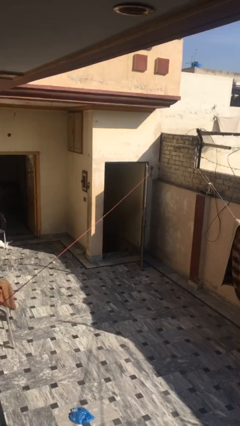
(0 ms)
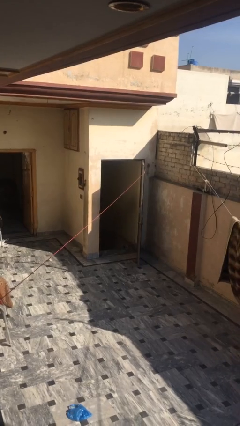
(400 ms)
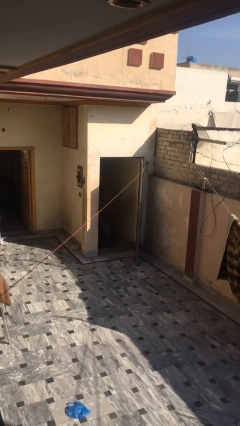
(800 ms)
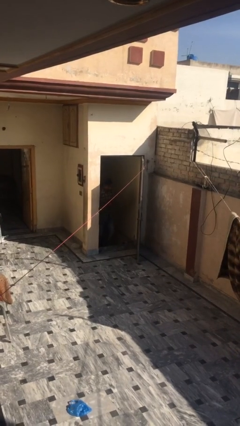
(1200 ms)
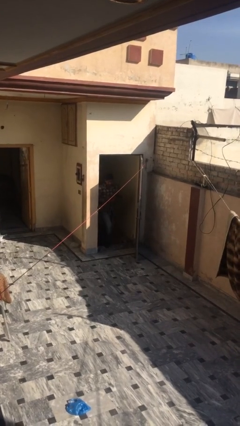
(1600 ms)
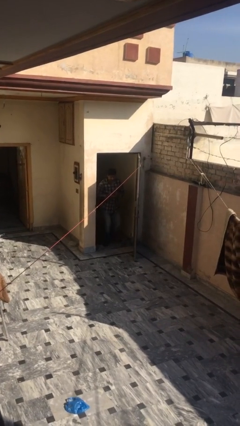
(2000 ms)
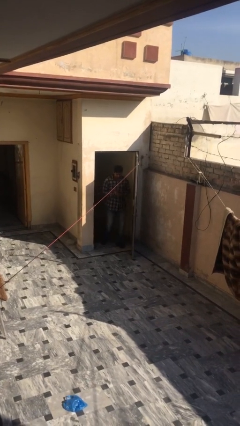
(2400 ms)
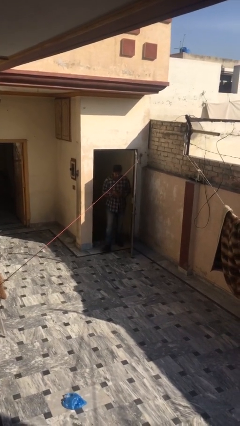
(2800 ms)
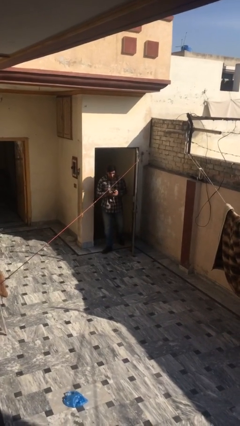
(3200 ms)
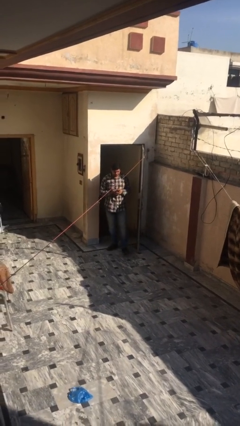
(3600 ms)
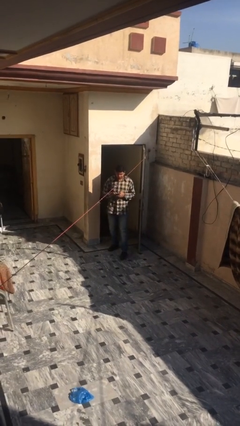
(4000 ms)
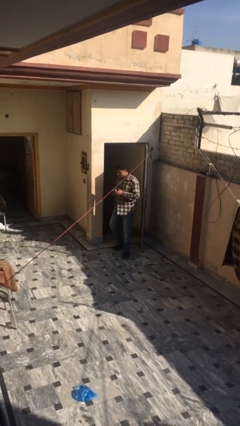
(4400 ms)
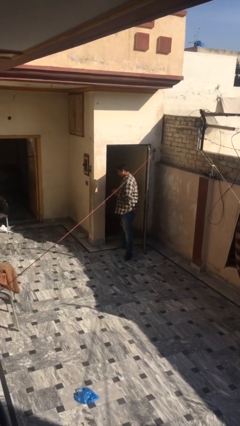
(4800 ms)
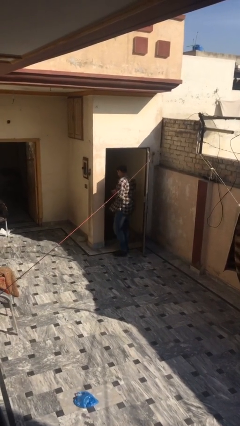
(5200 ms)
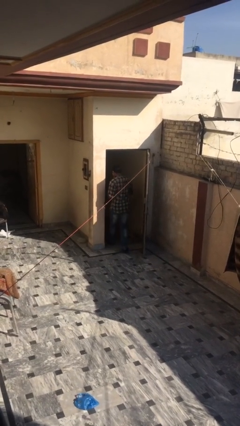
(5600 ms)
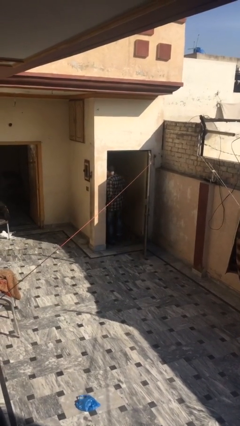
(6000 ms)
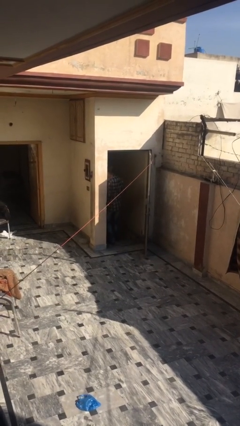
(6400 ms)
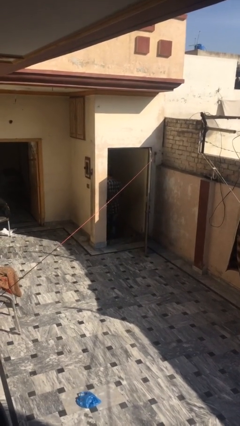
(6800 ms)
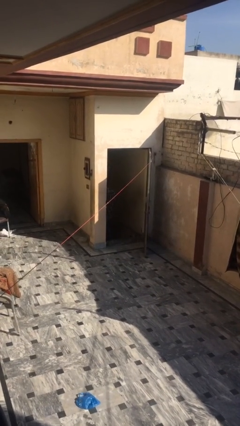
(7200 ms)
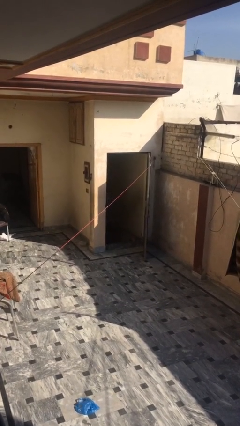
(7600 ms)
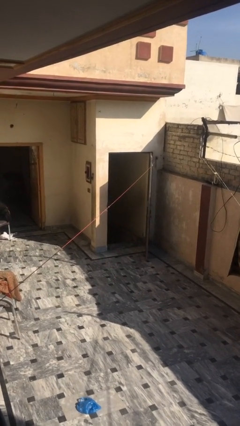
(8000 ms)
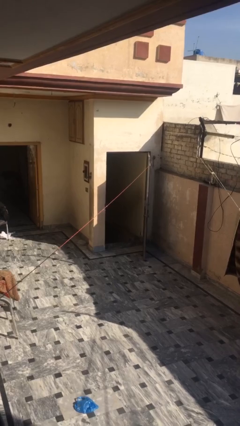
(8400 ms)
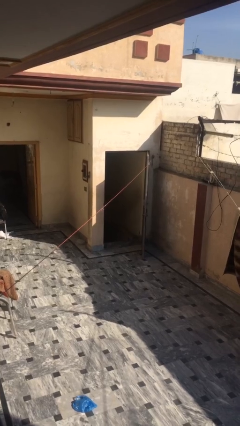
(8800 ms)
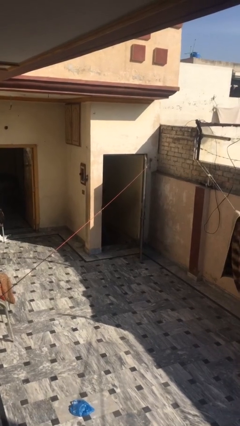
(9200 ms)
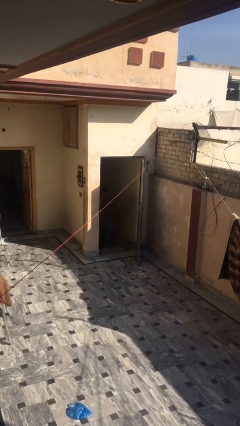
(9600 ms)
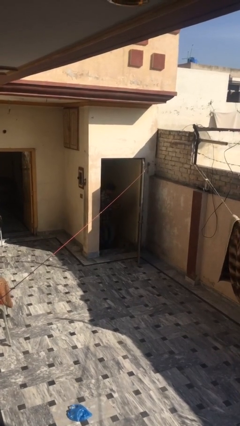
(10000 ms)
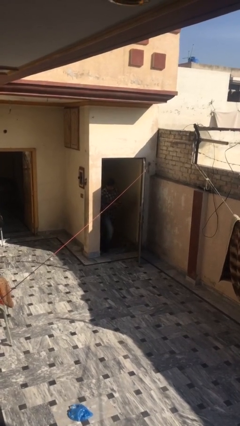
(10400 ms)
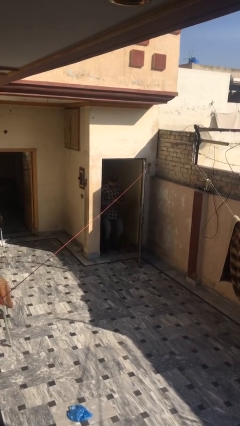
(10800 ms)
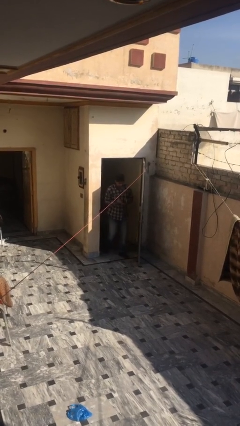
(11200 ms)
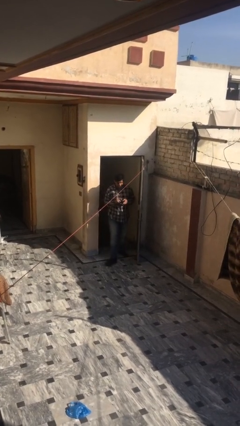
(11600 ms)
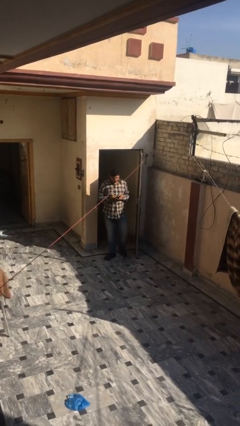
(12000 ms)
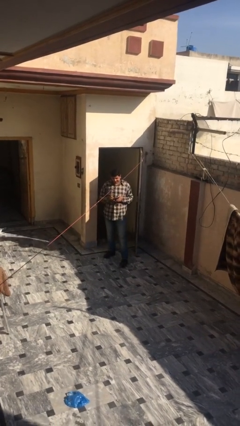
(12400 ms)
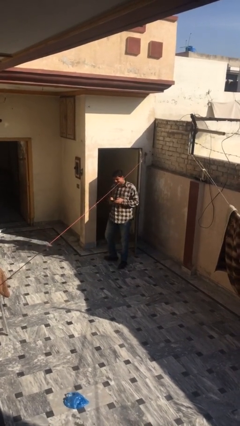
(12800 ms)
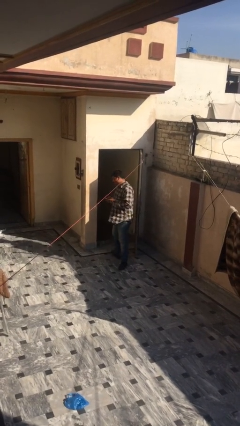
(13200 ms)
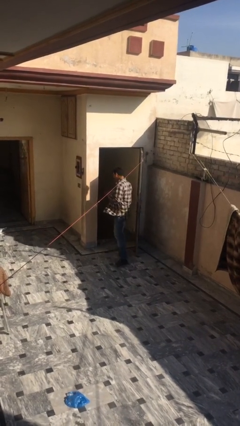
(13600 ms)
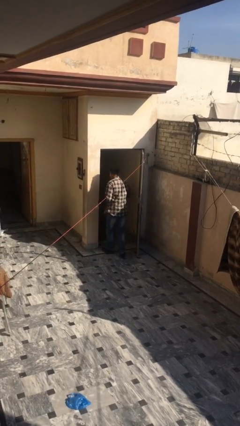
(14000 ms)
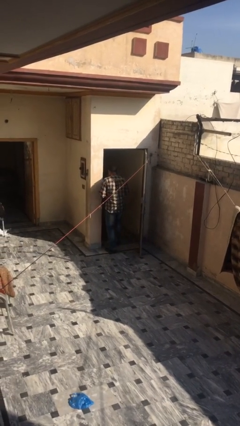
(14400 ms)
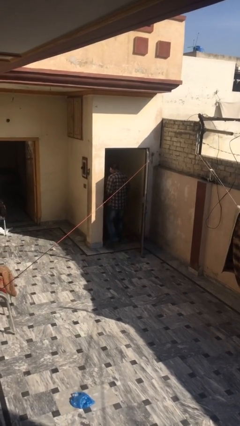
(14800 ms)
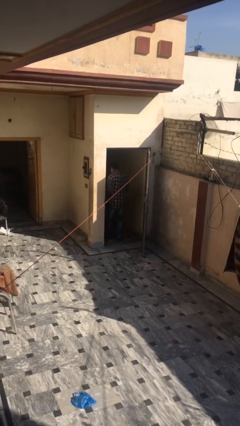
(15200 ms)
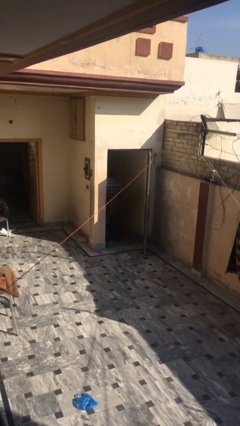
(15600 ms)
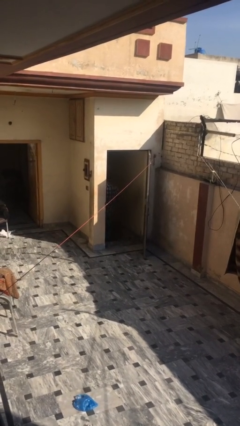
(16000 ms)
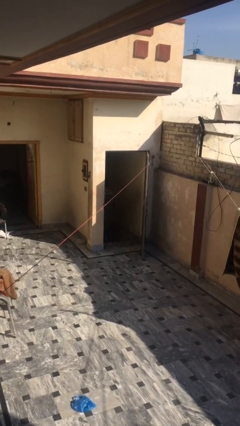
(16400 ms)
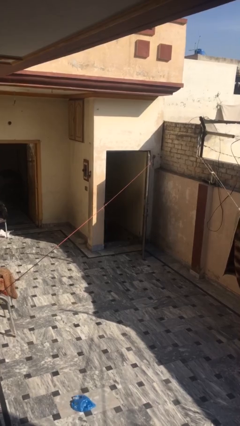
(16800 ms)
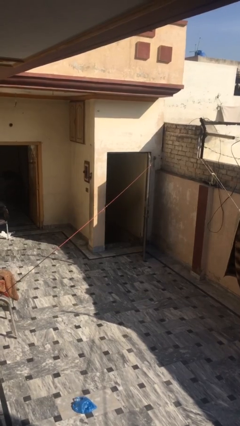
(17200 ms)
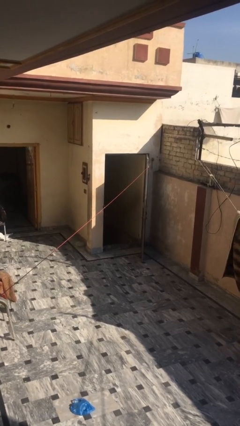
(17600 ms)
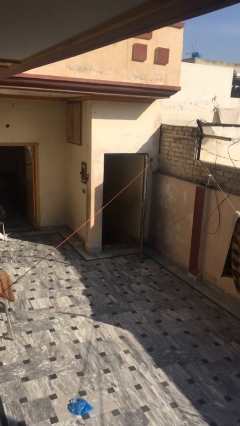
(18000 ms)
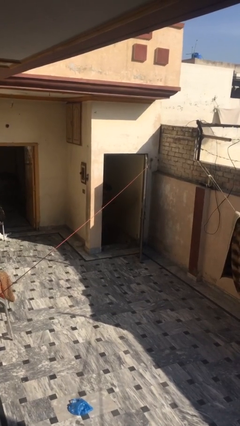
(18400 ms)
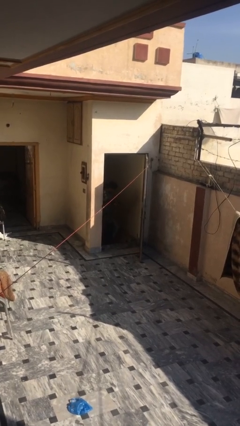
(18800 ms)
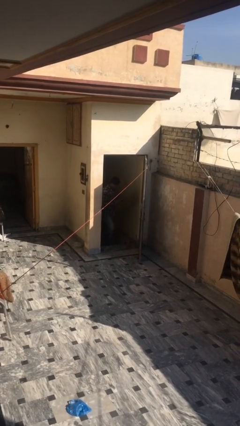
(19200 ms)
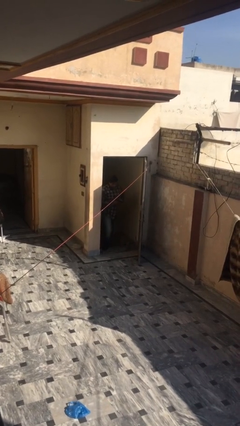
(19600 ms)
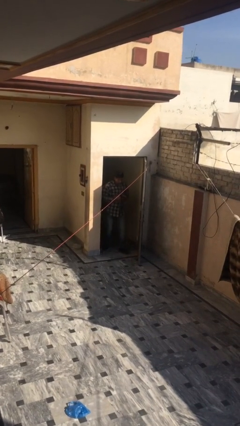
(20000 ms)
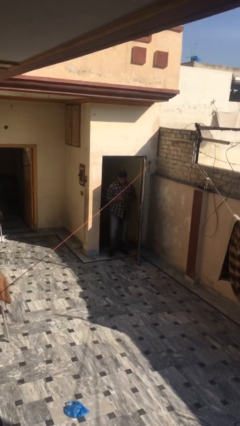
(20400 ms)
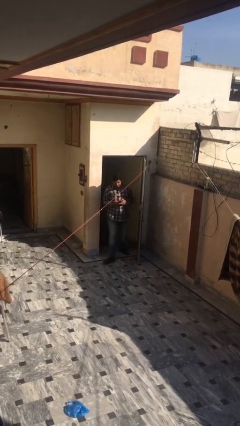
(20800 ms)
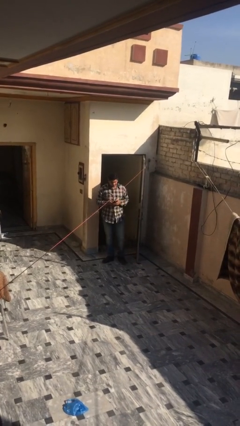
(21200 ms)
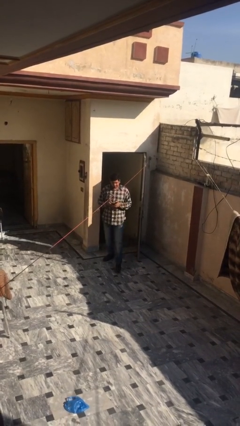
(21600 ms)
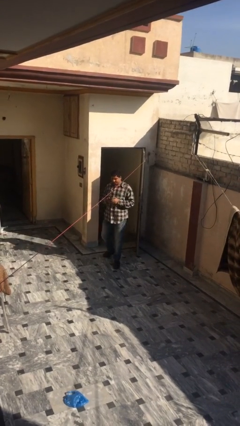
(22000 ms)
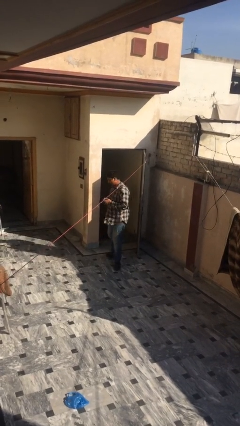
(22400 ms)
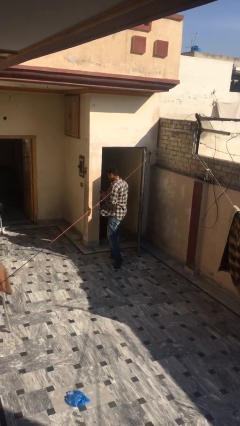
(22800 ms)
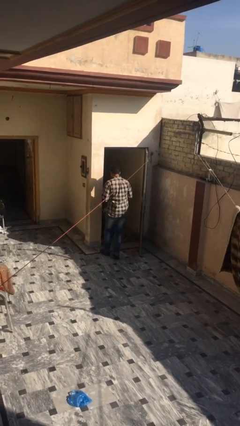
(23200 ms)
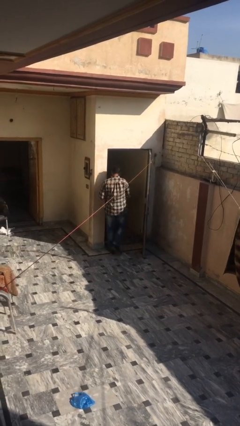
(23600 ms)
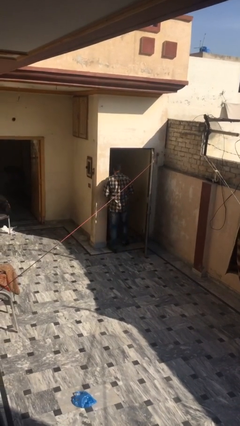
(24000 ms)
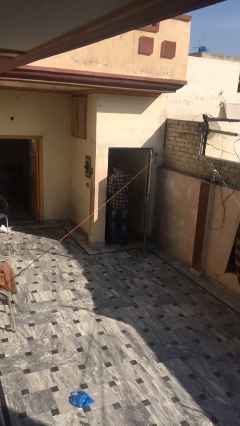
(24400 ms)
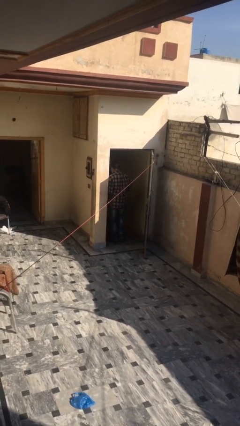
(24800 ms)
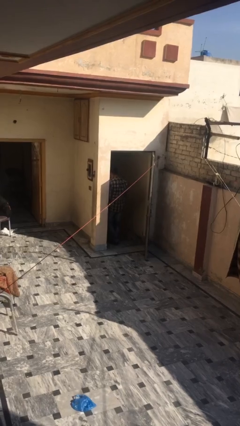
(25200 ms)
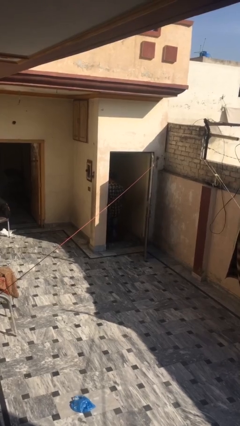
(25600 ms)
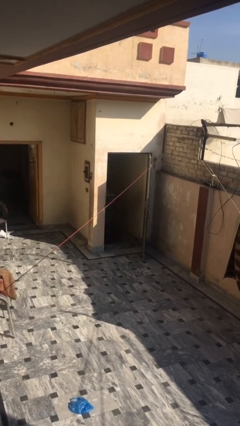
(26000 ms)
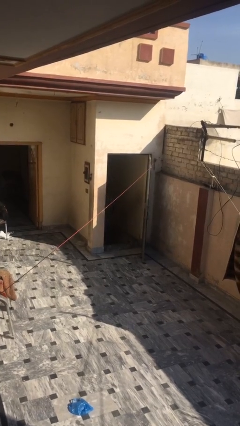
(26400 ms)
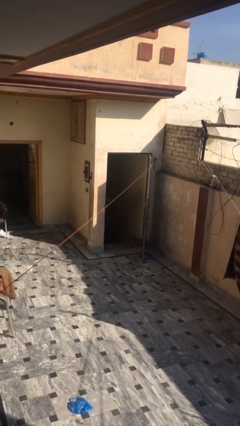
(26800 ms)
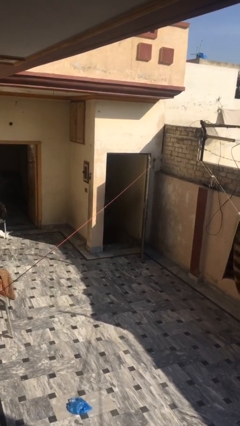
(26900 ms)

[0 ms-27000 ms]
person texts on phone

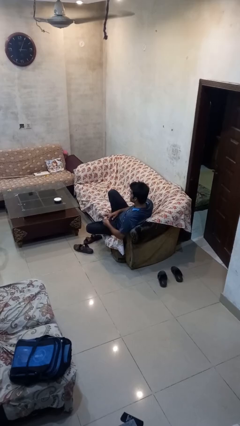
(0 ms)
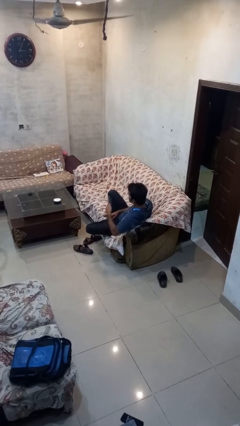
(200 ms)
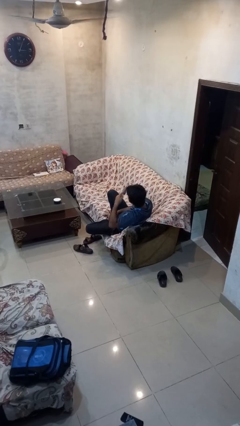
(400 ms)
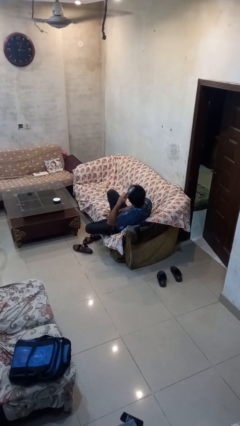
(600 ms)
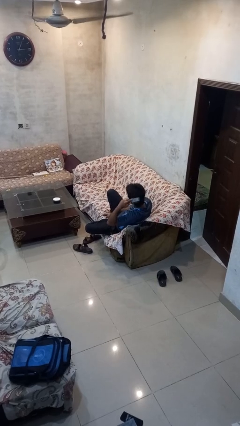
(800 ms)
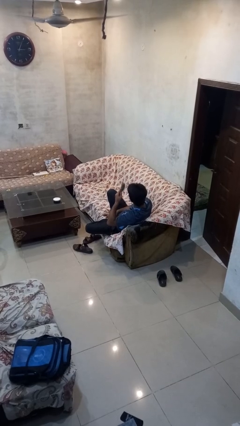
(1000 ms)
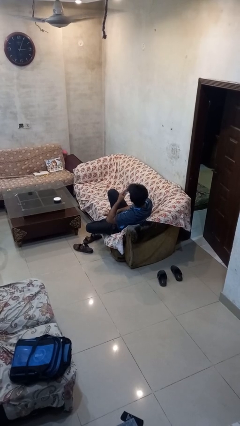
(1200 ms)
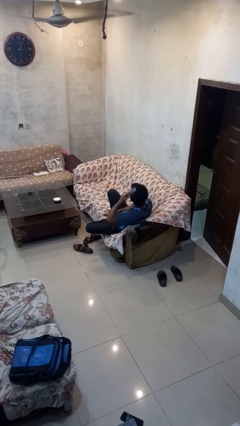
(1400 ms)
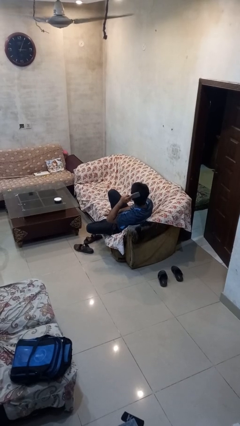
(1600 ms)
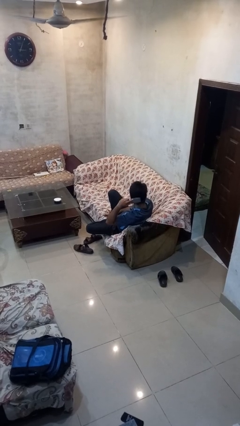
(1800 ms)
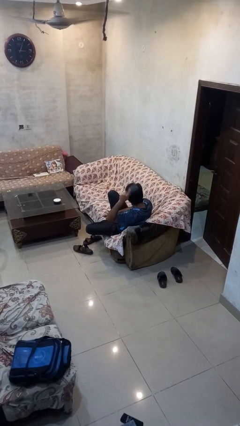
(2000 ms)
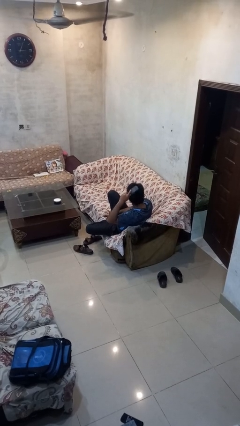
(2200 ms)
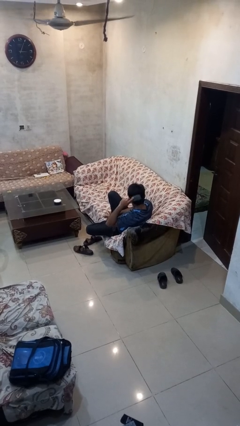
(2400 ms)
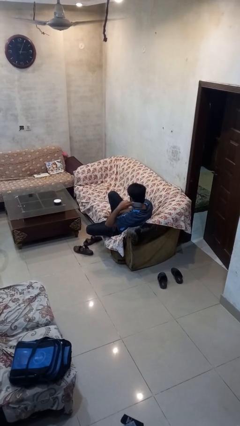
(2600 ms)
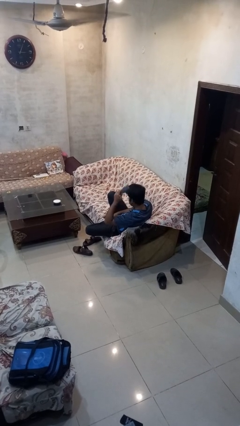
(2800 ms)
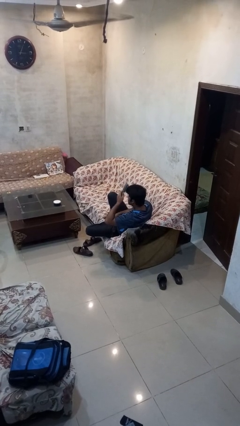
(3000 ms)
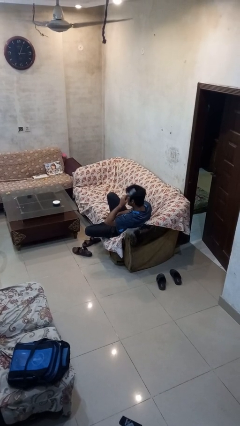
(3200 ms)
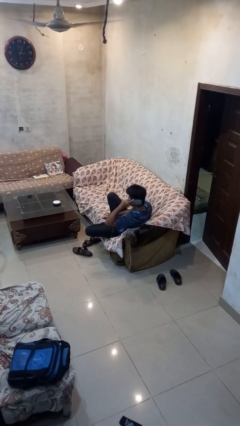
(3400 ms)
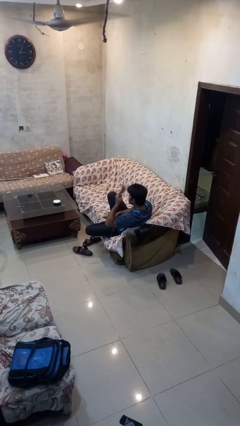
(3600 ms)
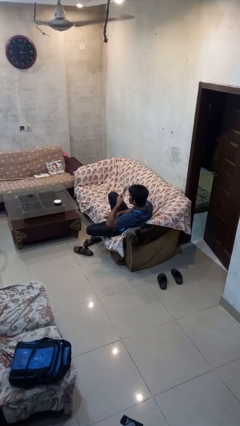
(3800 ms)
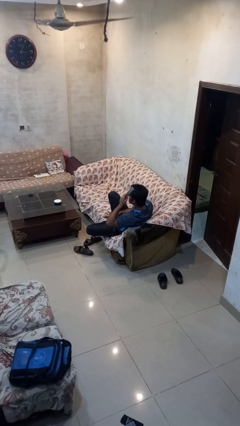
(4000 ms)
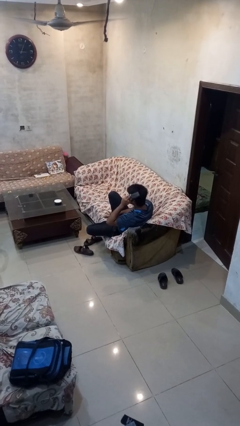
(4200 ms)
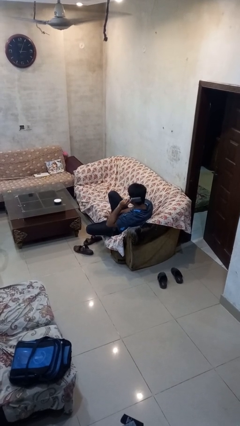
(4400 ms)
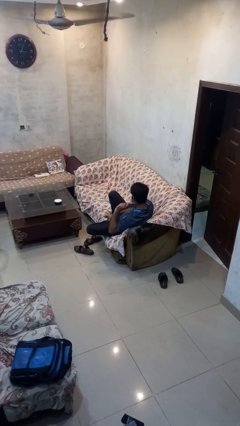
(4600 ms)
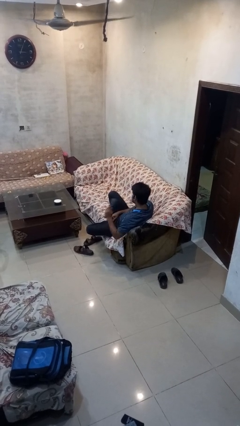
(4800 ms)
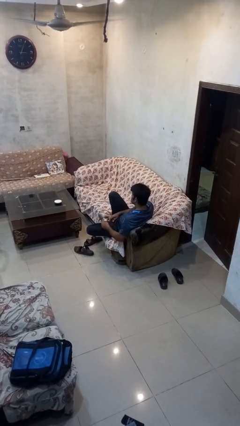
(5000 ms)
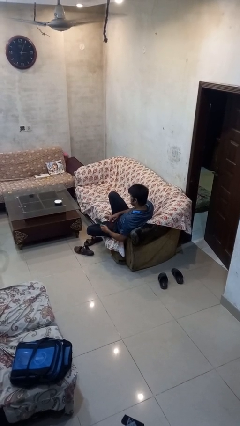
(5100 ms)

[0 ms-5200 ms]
person brushes hair
